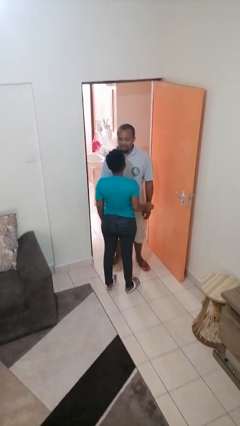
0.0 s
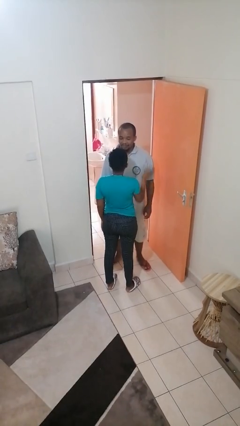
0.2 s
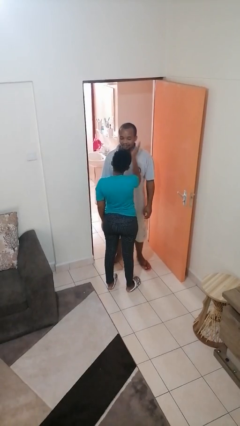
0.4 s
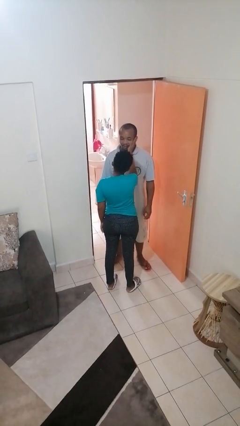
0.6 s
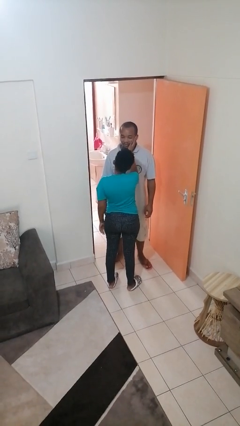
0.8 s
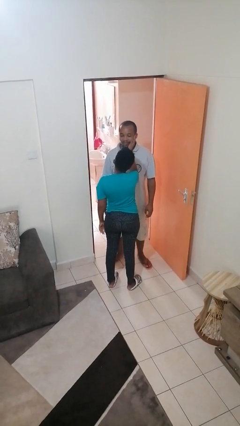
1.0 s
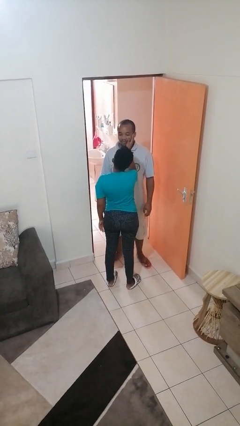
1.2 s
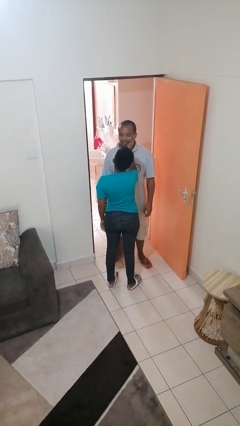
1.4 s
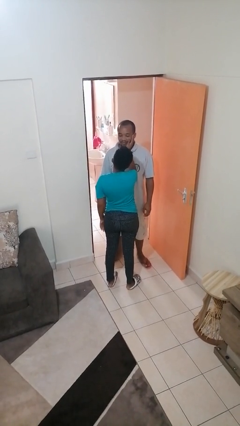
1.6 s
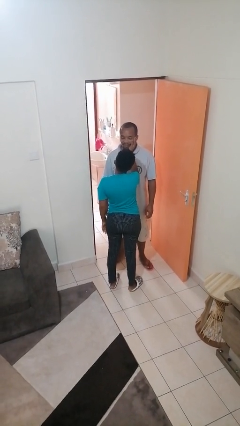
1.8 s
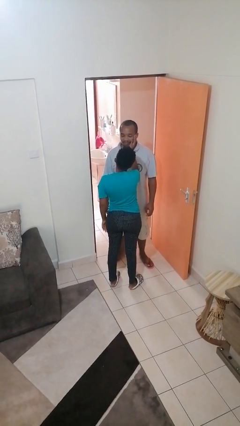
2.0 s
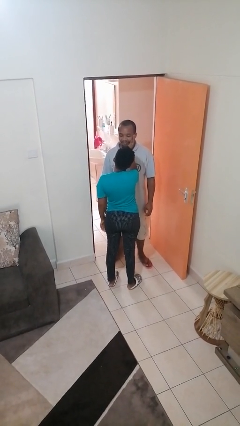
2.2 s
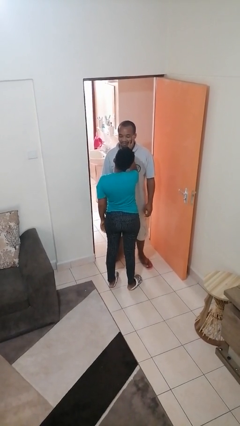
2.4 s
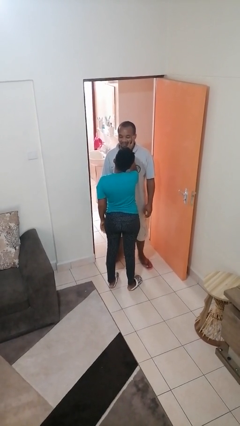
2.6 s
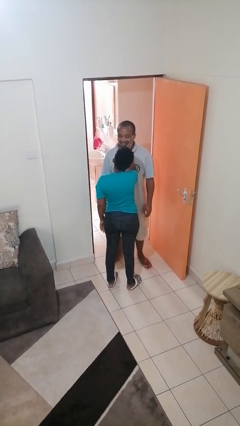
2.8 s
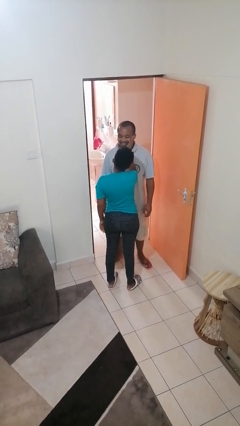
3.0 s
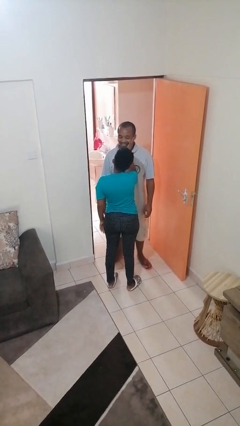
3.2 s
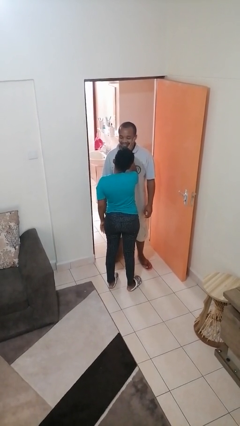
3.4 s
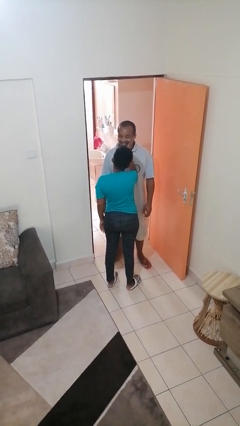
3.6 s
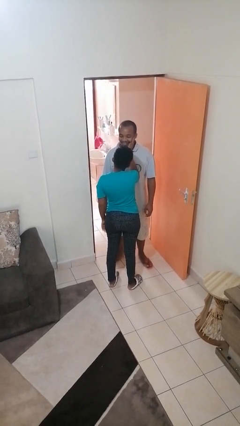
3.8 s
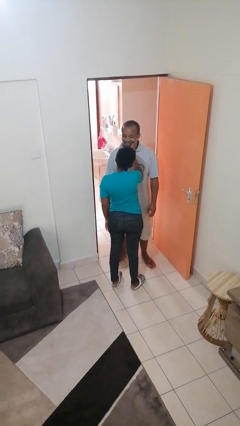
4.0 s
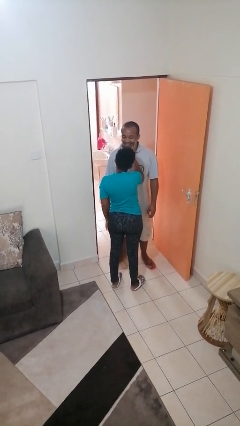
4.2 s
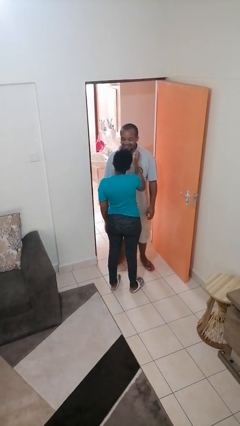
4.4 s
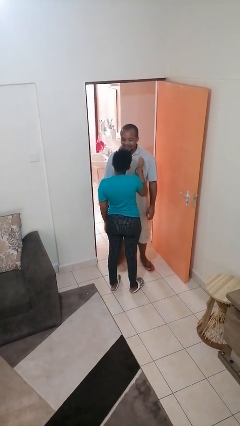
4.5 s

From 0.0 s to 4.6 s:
person touches face of person

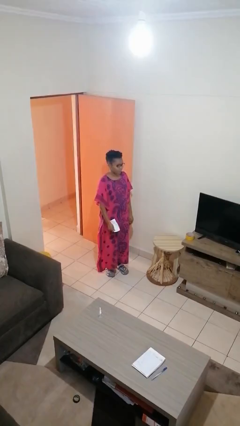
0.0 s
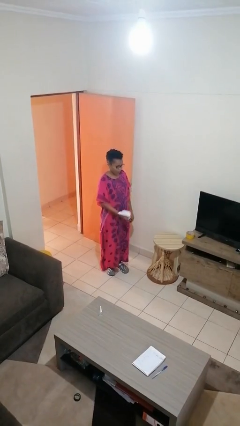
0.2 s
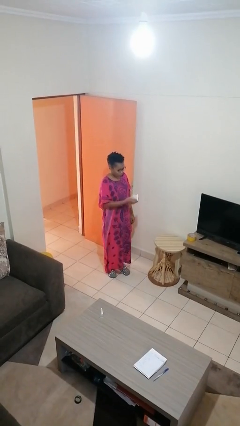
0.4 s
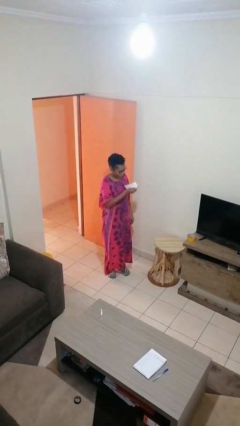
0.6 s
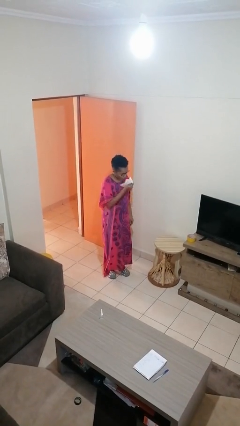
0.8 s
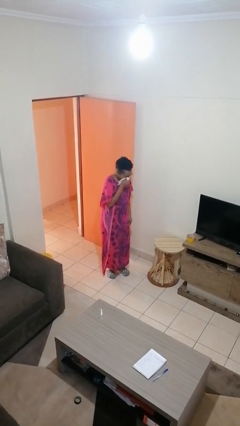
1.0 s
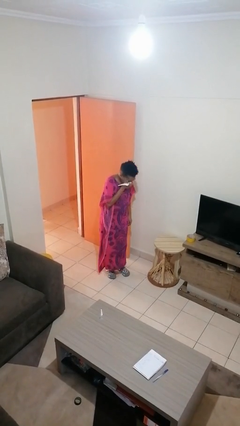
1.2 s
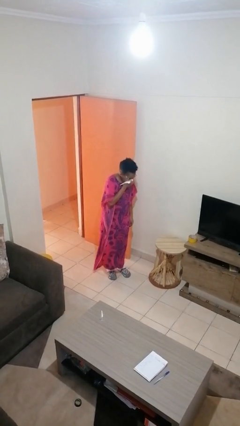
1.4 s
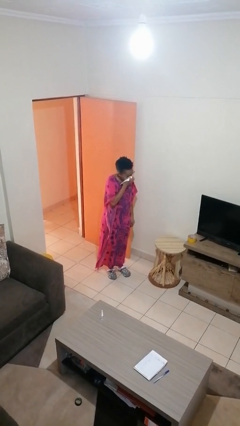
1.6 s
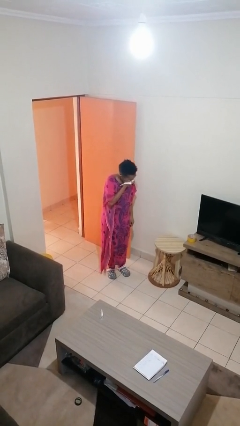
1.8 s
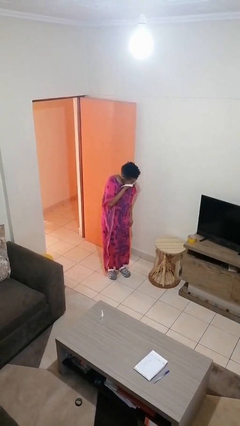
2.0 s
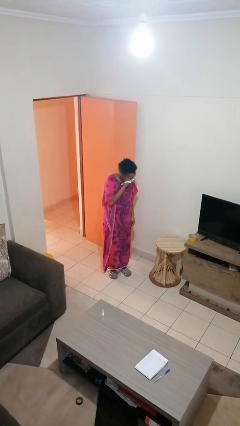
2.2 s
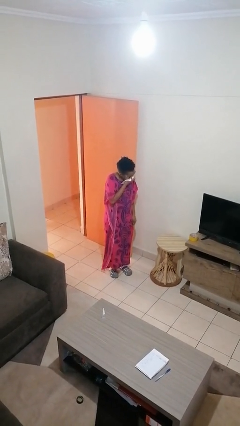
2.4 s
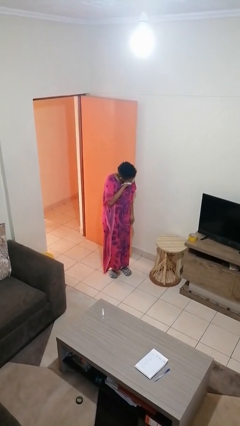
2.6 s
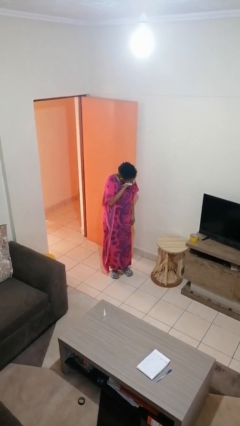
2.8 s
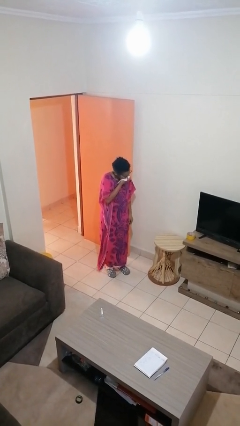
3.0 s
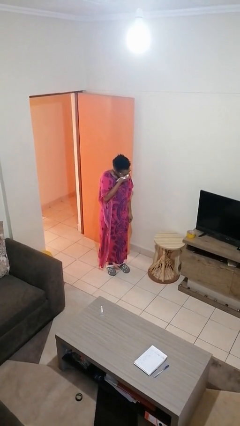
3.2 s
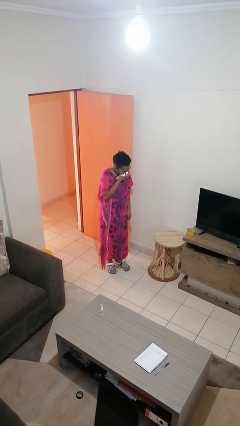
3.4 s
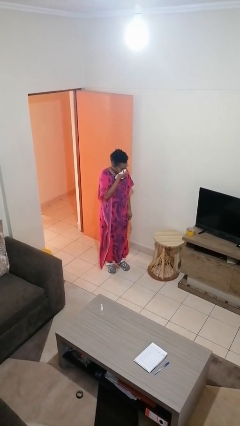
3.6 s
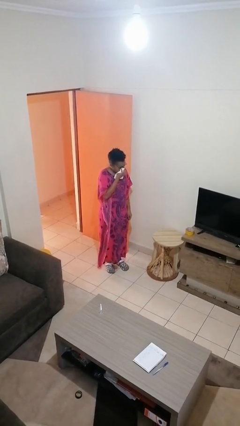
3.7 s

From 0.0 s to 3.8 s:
person blows nose

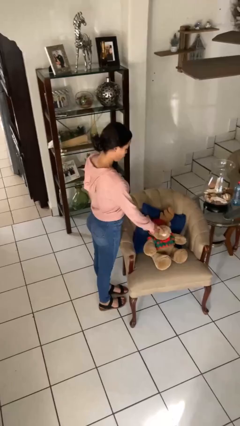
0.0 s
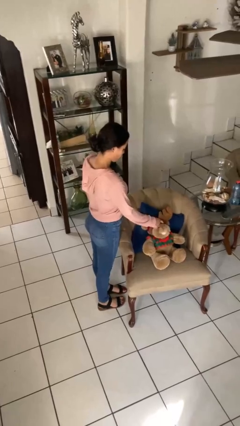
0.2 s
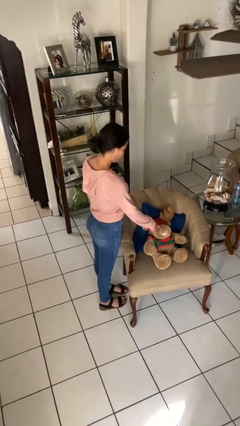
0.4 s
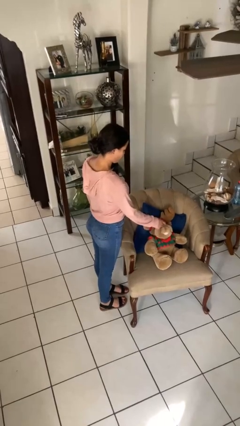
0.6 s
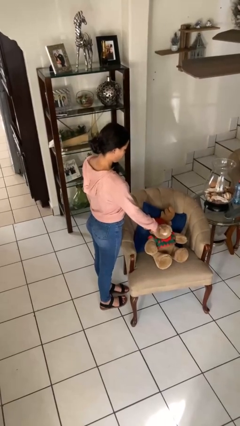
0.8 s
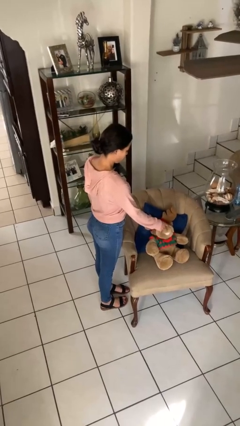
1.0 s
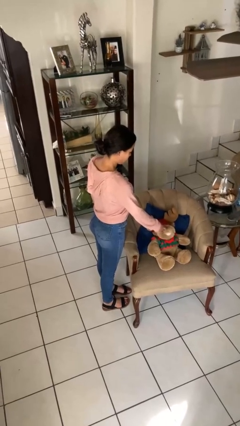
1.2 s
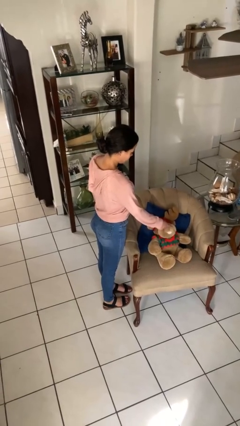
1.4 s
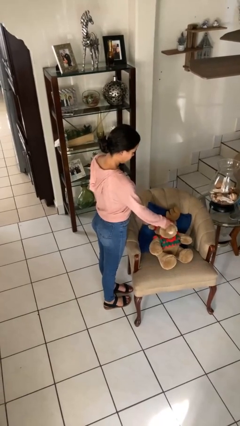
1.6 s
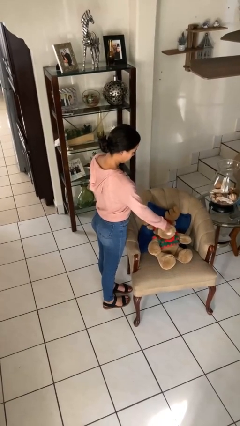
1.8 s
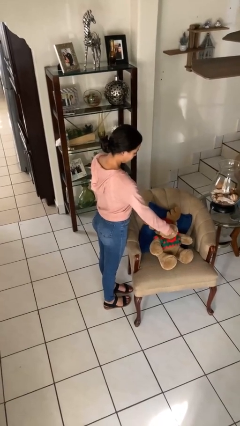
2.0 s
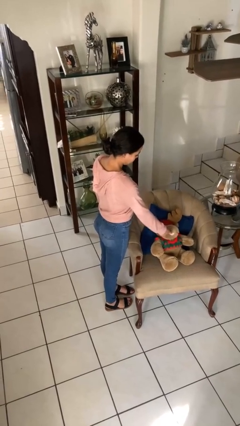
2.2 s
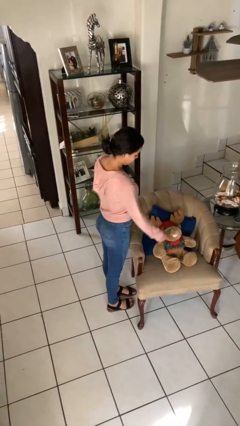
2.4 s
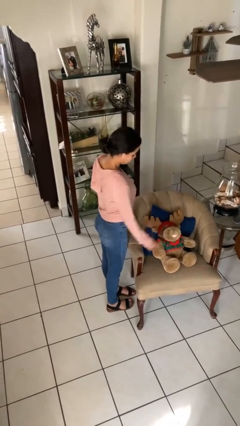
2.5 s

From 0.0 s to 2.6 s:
person taps object with finger

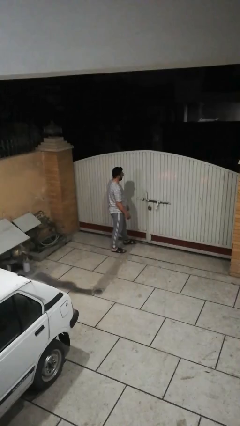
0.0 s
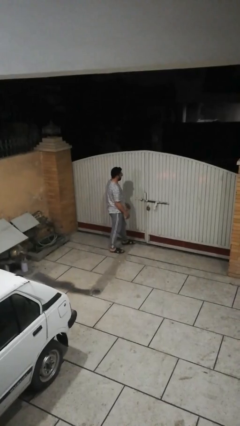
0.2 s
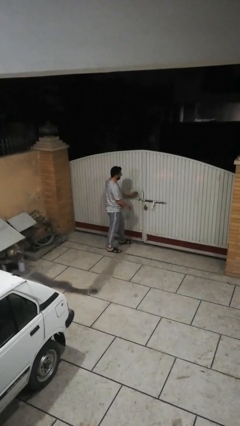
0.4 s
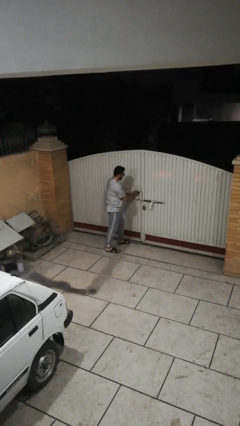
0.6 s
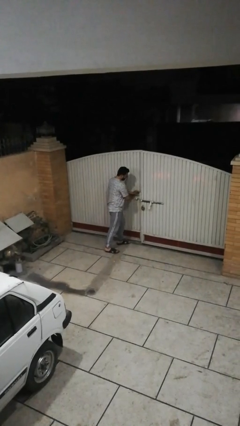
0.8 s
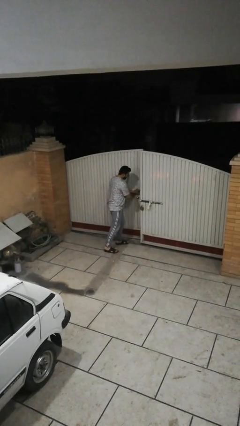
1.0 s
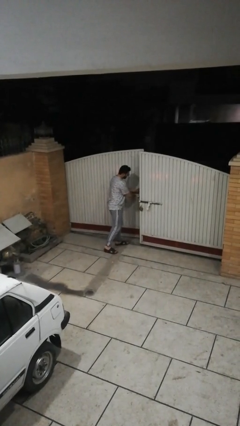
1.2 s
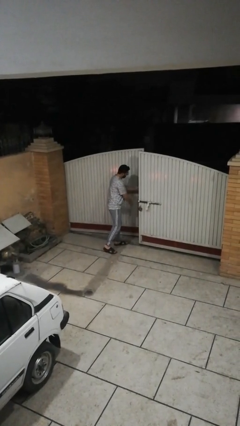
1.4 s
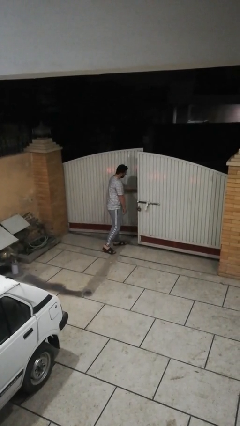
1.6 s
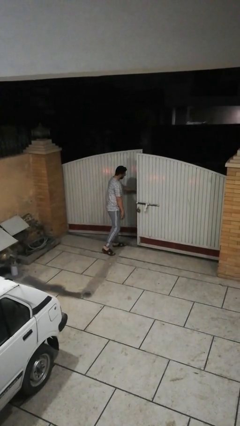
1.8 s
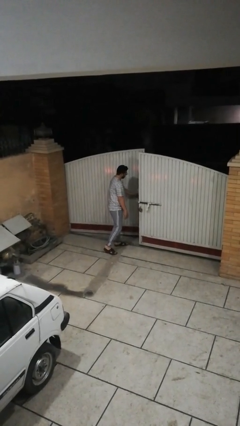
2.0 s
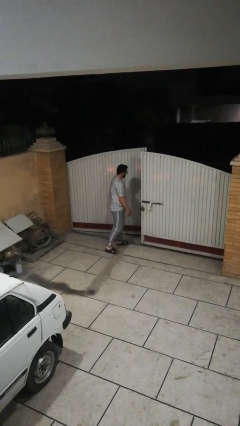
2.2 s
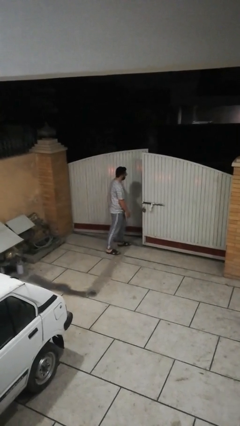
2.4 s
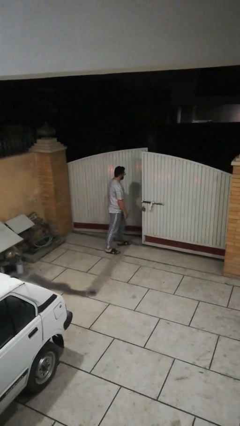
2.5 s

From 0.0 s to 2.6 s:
person opens facility door

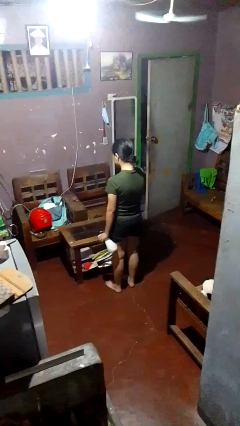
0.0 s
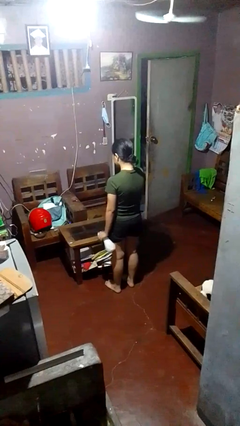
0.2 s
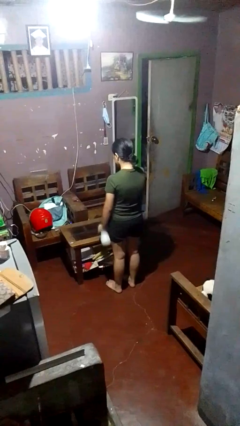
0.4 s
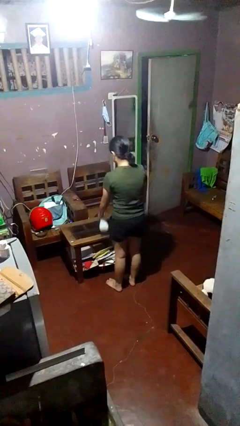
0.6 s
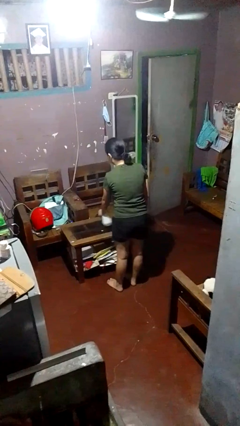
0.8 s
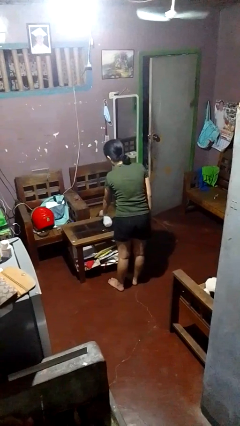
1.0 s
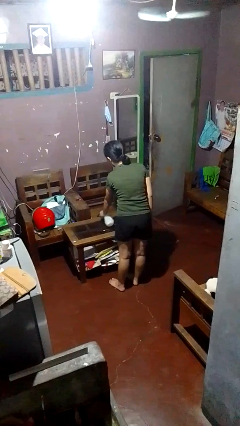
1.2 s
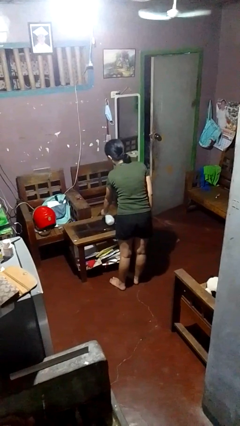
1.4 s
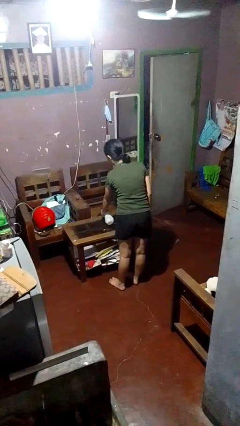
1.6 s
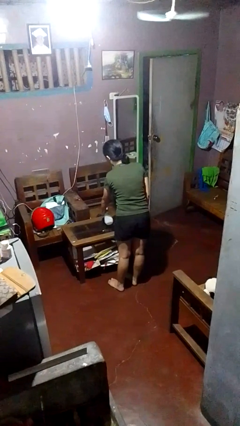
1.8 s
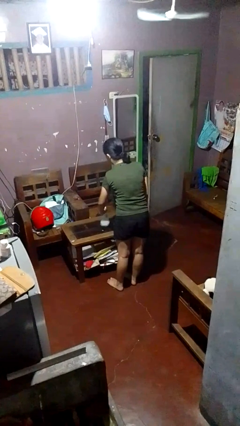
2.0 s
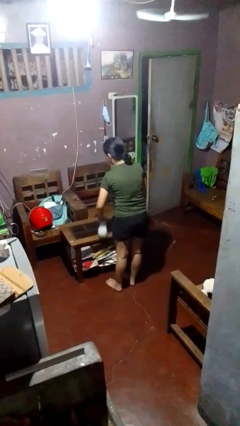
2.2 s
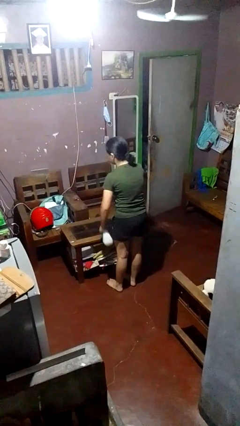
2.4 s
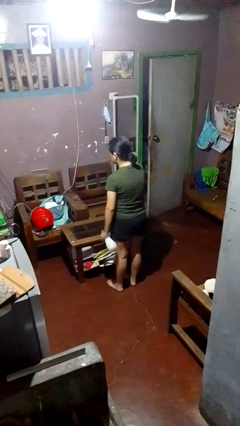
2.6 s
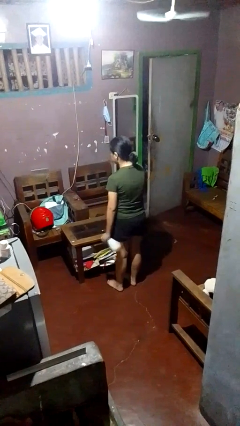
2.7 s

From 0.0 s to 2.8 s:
person sprays from bottle

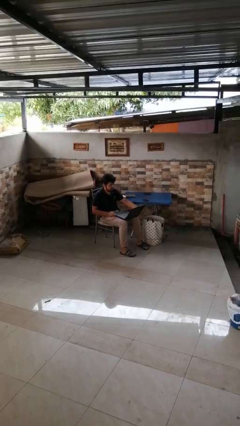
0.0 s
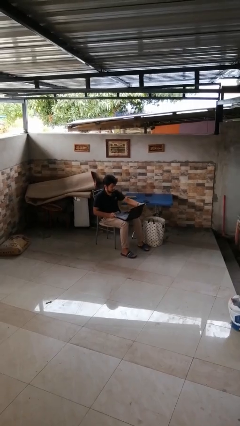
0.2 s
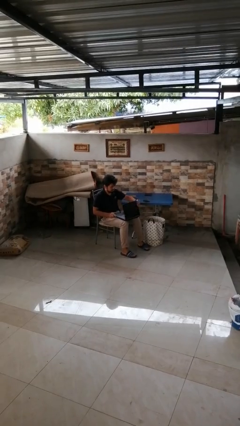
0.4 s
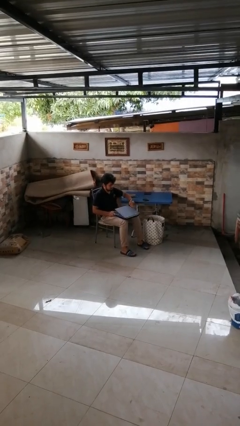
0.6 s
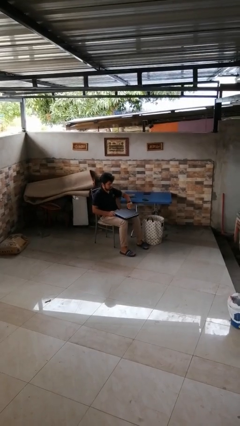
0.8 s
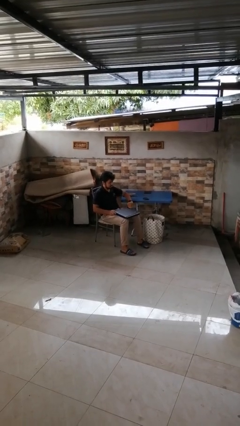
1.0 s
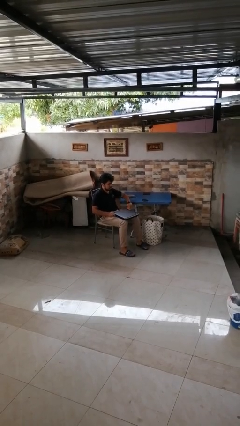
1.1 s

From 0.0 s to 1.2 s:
person closes laptop
